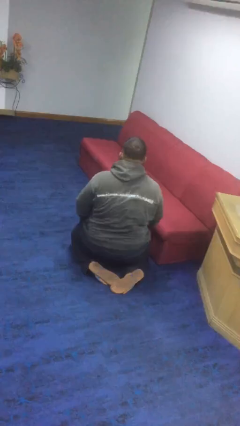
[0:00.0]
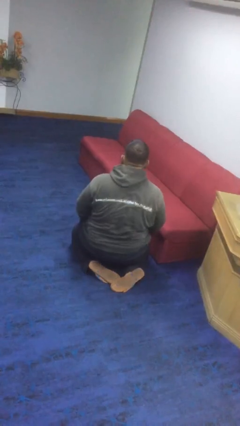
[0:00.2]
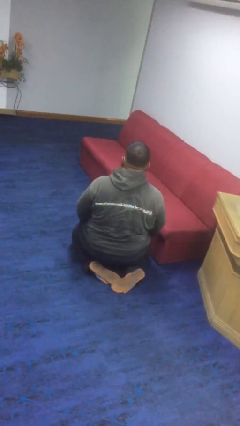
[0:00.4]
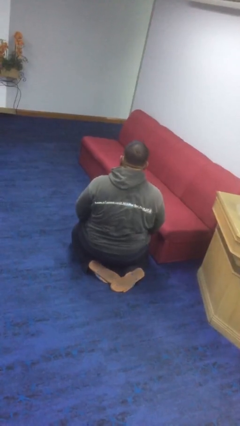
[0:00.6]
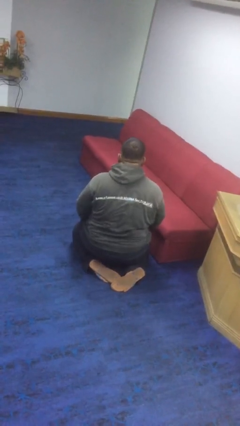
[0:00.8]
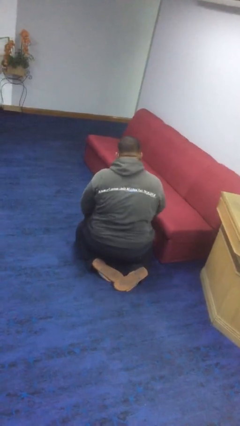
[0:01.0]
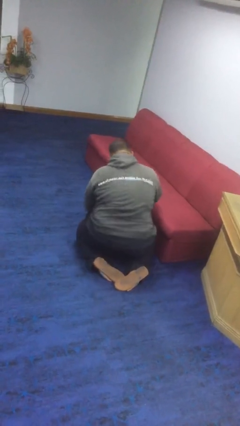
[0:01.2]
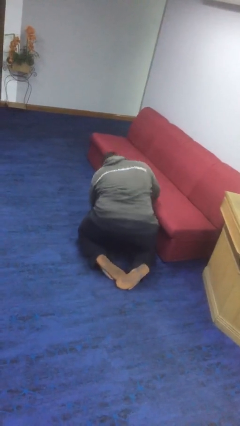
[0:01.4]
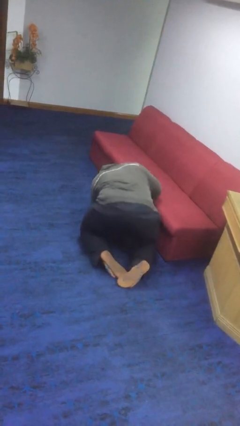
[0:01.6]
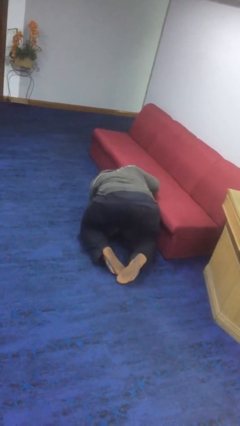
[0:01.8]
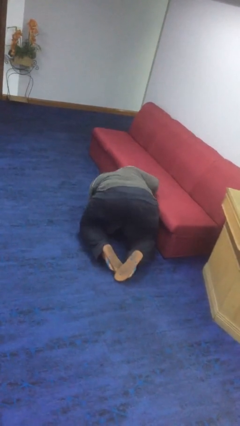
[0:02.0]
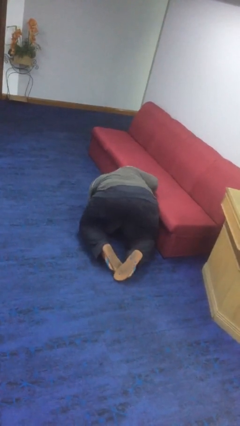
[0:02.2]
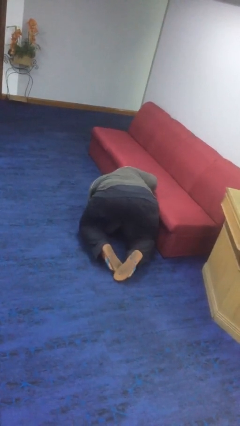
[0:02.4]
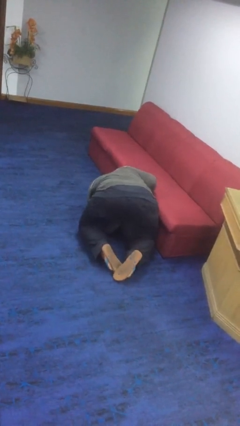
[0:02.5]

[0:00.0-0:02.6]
person searches under couch

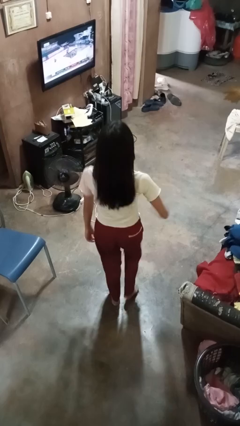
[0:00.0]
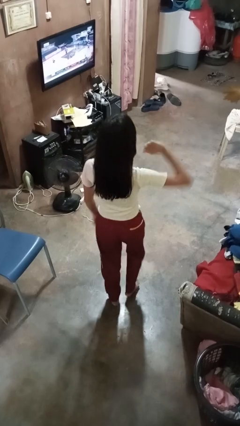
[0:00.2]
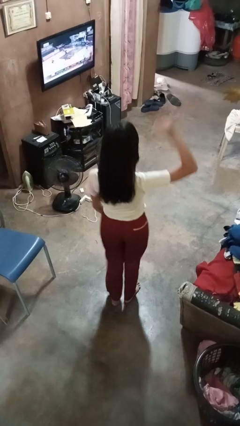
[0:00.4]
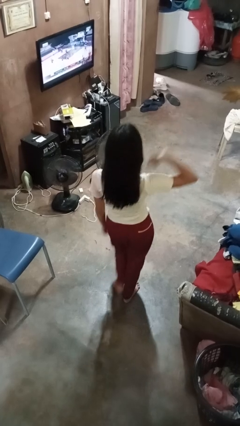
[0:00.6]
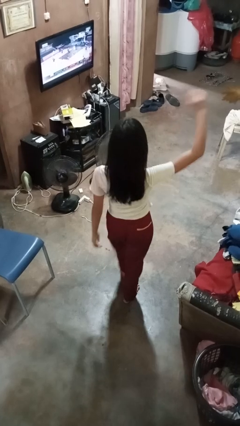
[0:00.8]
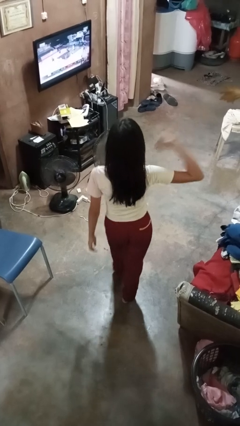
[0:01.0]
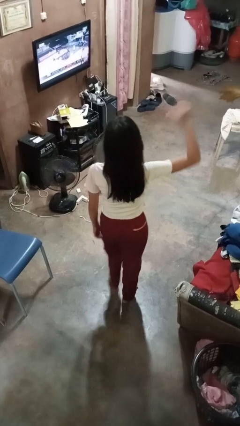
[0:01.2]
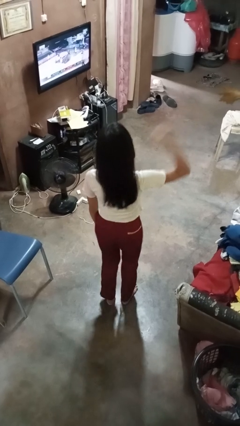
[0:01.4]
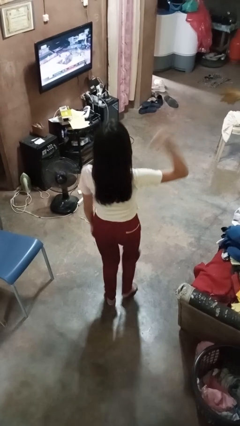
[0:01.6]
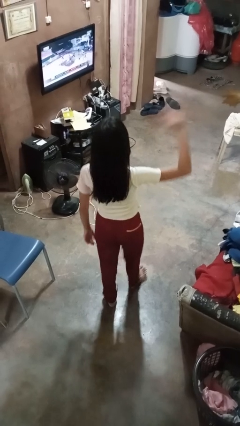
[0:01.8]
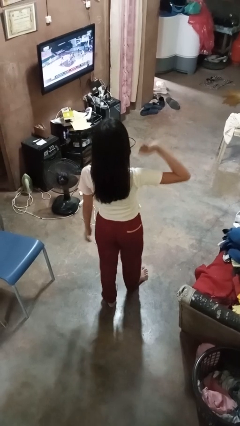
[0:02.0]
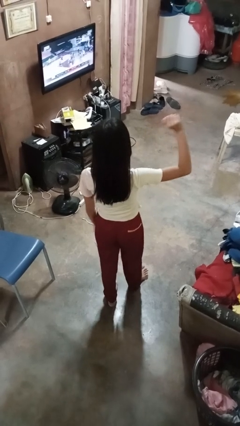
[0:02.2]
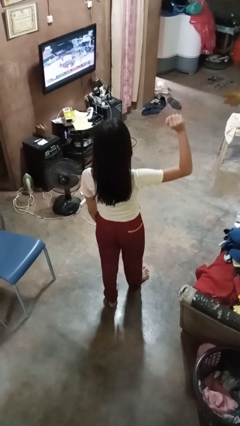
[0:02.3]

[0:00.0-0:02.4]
person dances in place

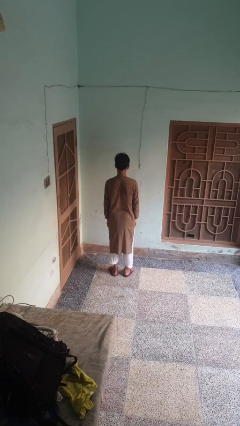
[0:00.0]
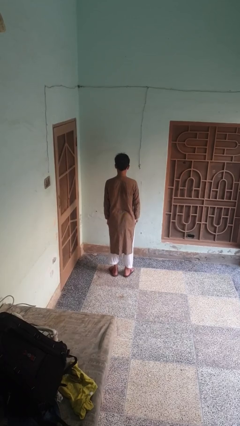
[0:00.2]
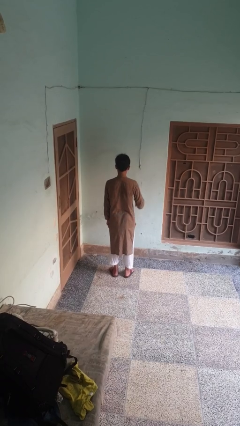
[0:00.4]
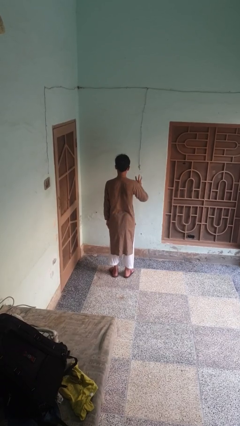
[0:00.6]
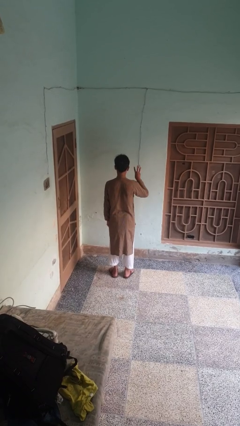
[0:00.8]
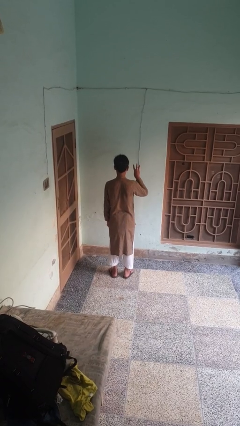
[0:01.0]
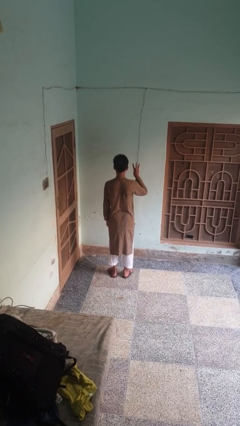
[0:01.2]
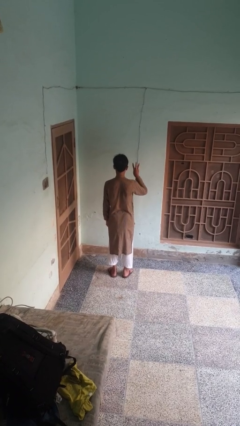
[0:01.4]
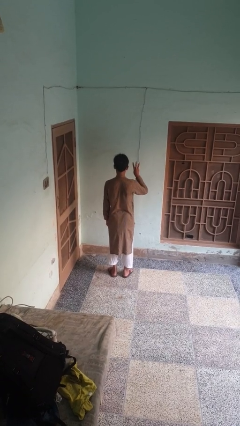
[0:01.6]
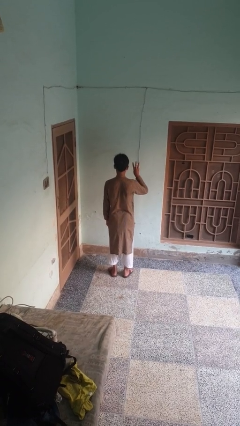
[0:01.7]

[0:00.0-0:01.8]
person gestures number three

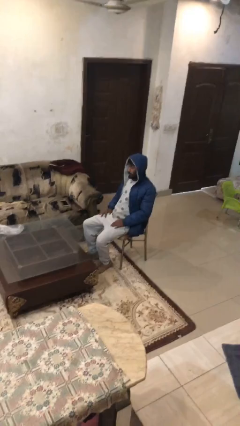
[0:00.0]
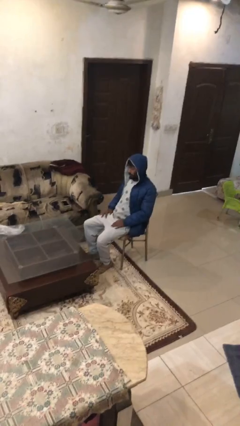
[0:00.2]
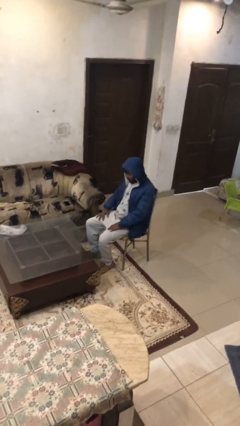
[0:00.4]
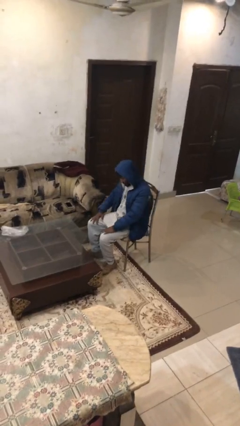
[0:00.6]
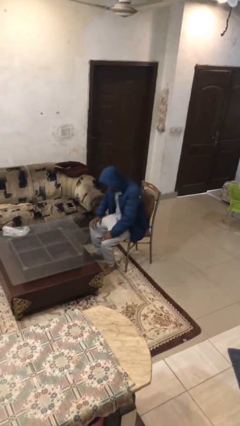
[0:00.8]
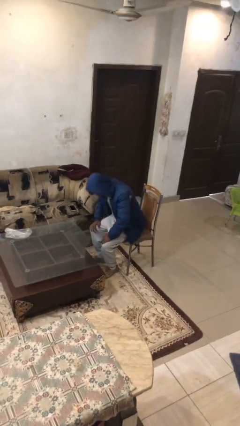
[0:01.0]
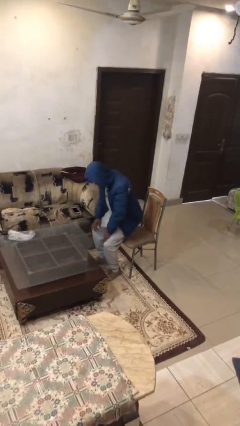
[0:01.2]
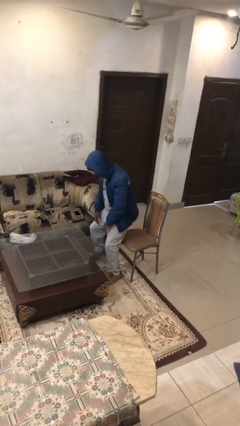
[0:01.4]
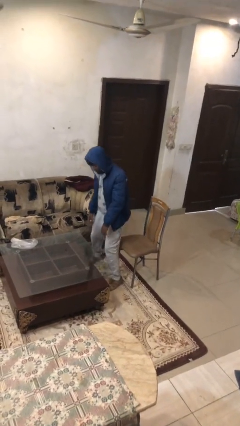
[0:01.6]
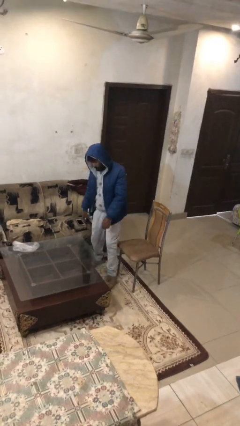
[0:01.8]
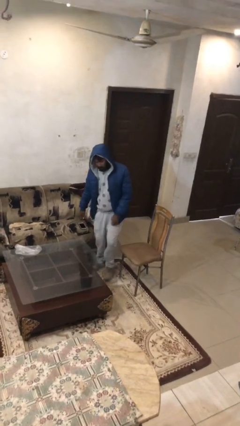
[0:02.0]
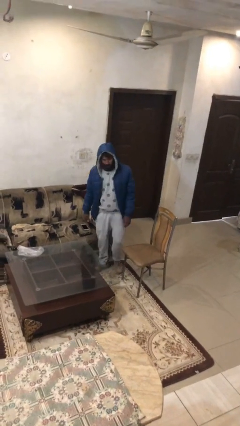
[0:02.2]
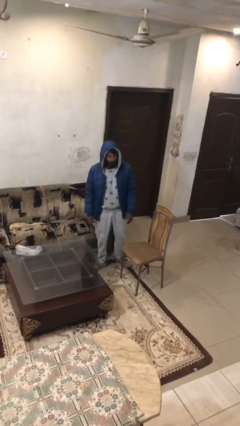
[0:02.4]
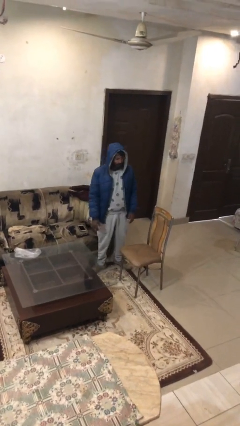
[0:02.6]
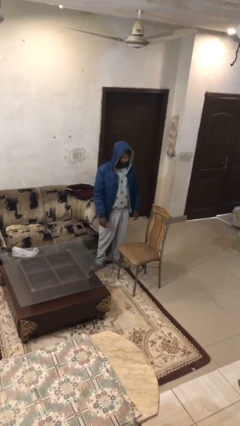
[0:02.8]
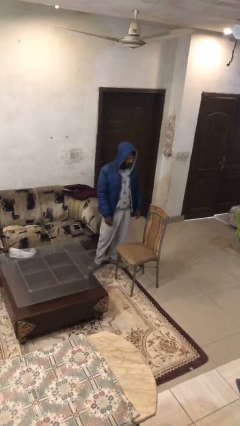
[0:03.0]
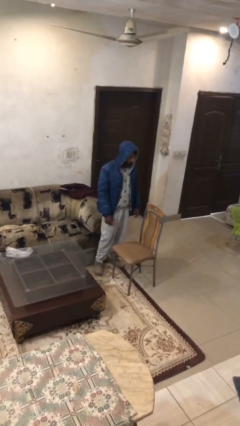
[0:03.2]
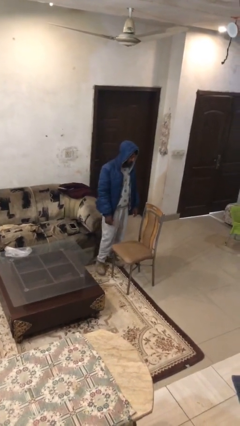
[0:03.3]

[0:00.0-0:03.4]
person stands up

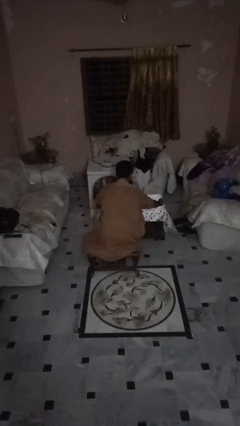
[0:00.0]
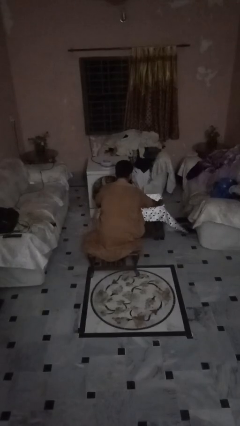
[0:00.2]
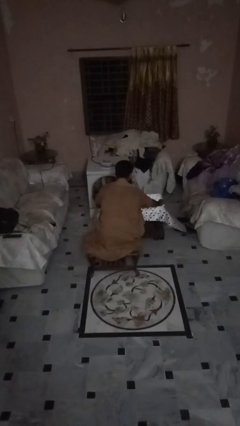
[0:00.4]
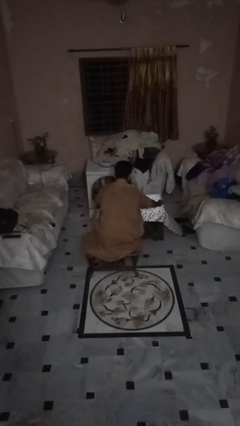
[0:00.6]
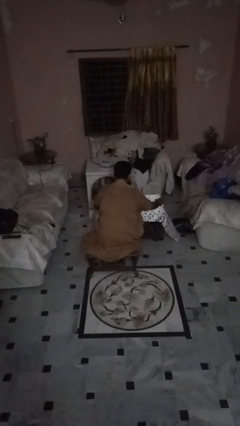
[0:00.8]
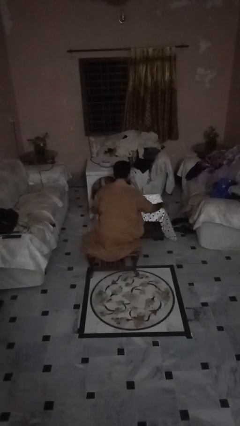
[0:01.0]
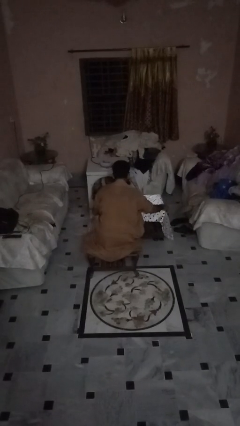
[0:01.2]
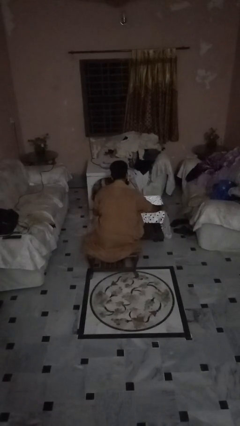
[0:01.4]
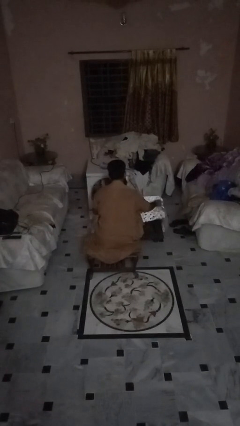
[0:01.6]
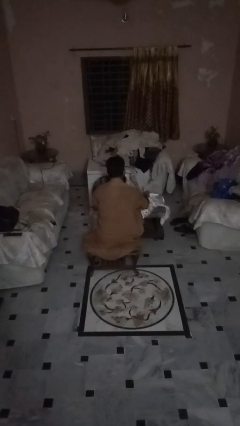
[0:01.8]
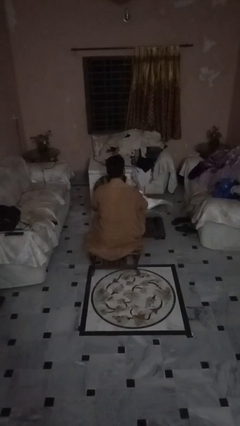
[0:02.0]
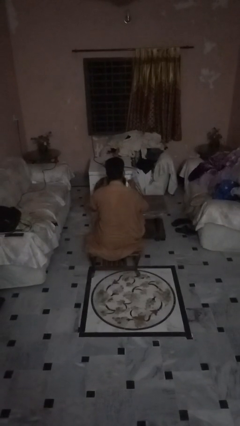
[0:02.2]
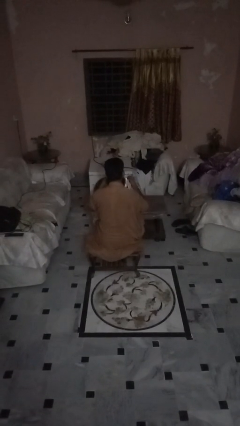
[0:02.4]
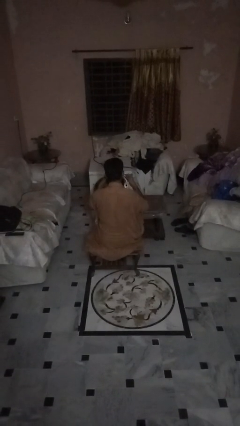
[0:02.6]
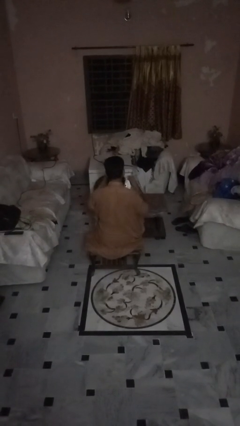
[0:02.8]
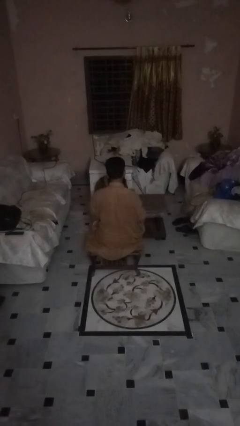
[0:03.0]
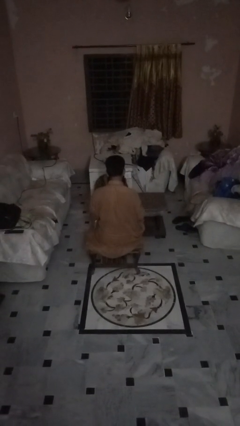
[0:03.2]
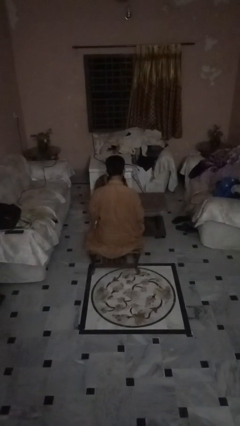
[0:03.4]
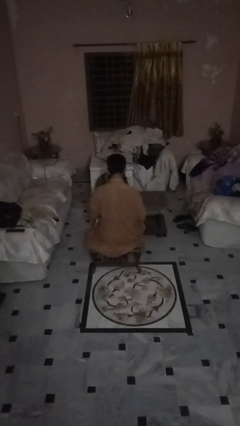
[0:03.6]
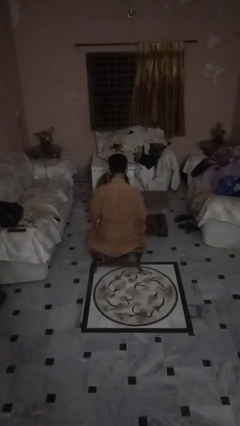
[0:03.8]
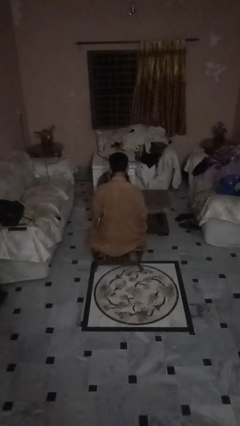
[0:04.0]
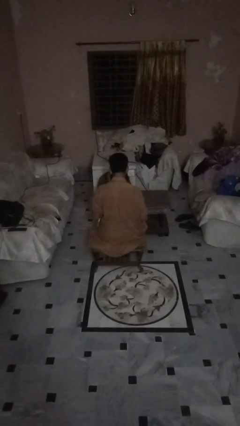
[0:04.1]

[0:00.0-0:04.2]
person folds tablecloth

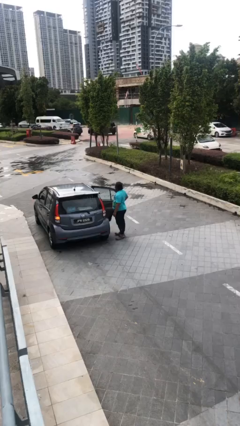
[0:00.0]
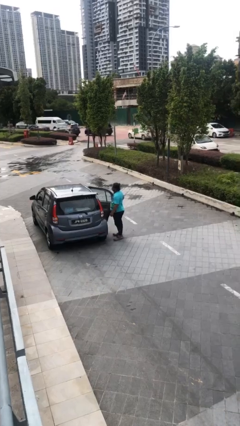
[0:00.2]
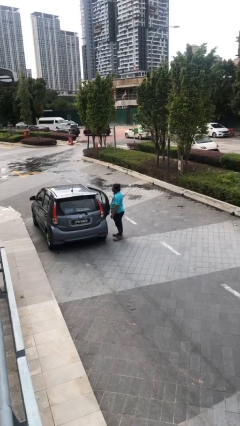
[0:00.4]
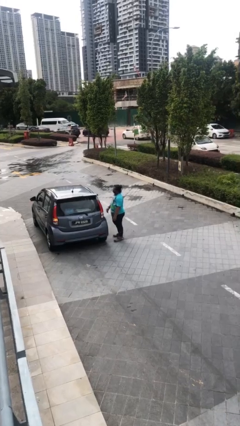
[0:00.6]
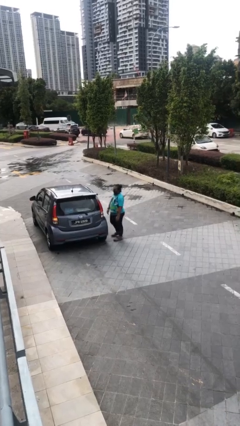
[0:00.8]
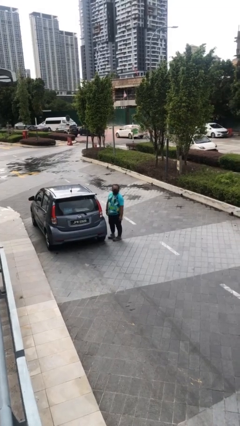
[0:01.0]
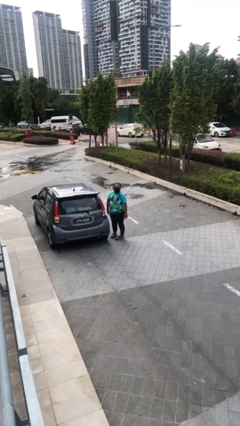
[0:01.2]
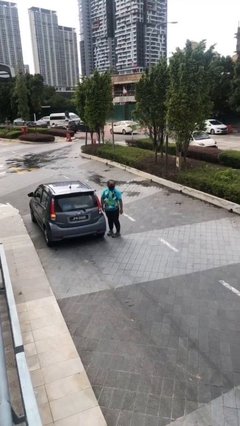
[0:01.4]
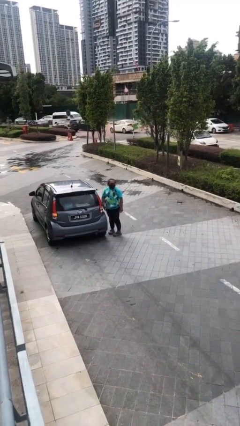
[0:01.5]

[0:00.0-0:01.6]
person closes car door

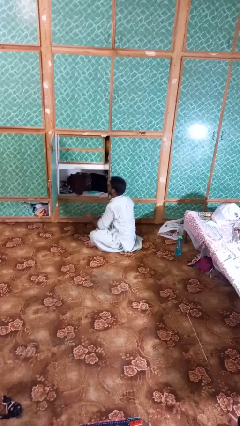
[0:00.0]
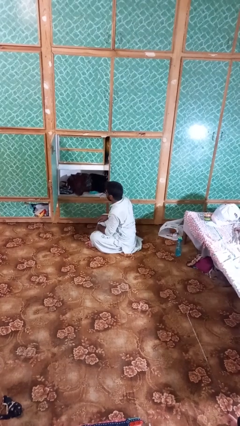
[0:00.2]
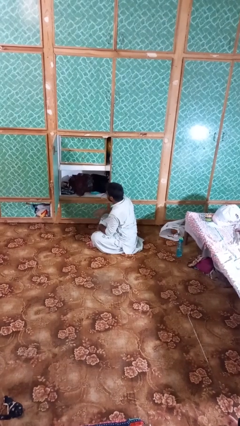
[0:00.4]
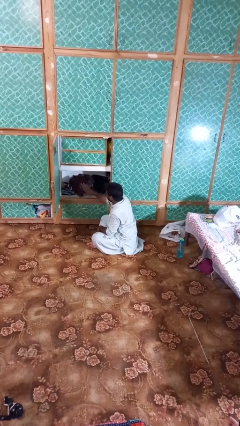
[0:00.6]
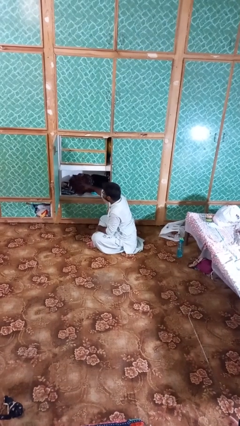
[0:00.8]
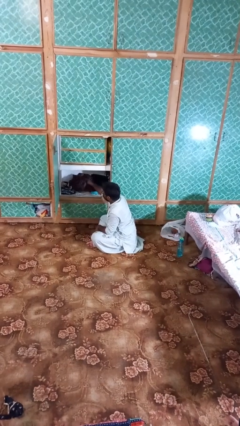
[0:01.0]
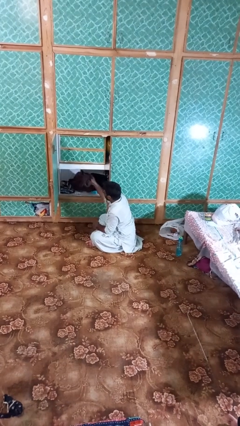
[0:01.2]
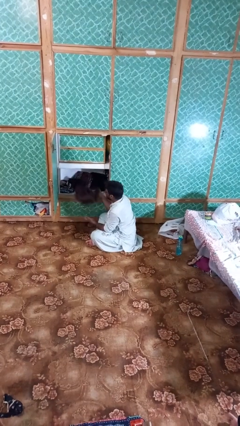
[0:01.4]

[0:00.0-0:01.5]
person takes clothes from dresser
